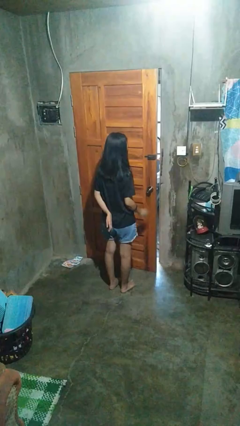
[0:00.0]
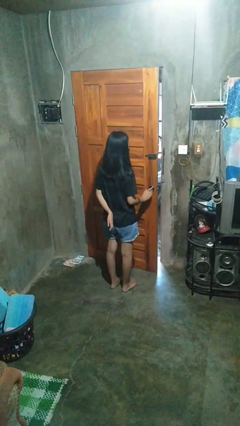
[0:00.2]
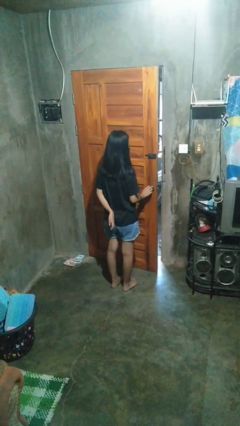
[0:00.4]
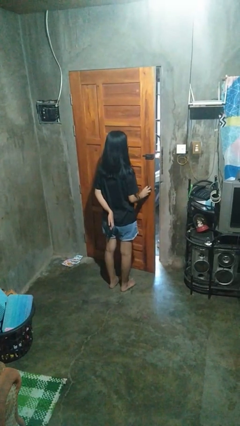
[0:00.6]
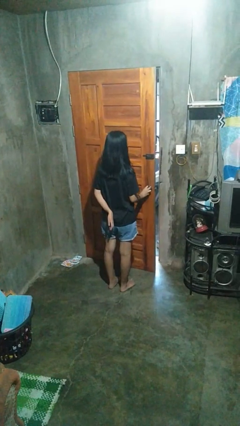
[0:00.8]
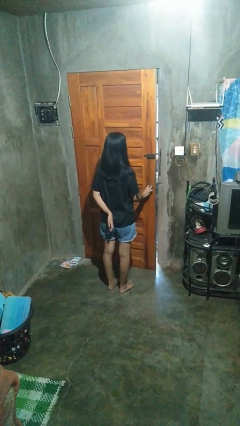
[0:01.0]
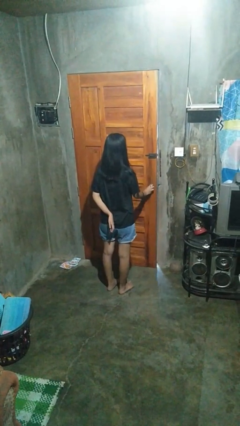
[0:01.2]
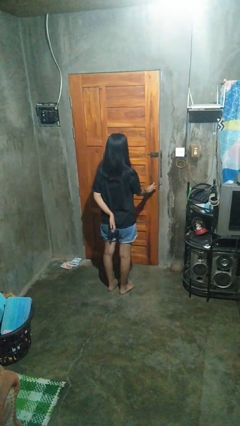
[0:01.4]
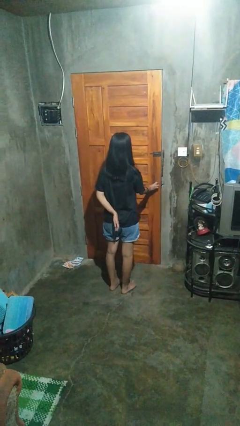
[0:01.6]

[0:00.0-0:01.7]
person closes facility door

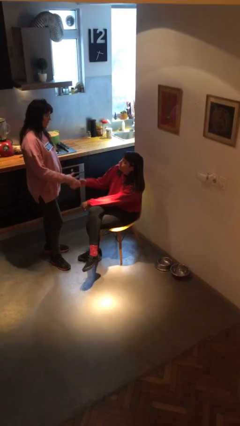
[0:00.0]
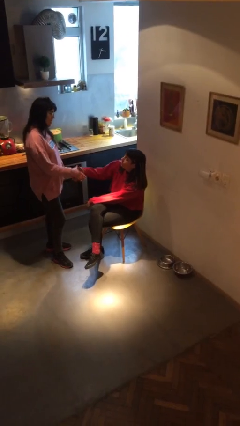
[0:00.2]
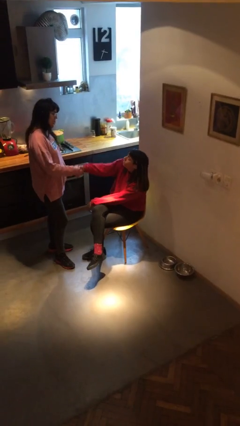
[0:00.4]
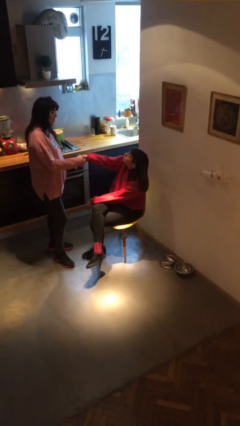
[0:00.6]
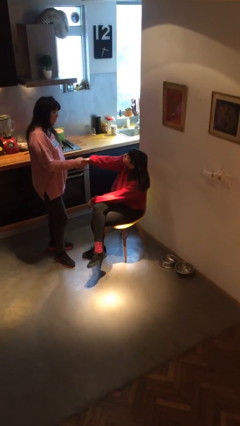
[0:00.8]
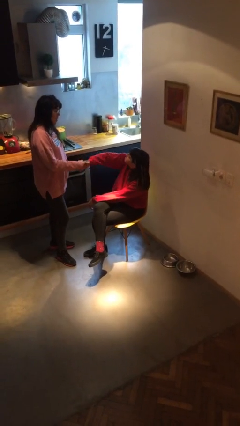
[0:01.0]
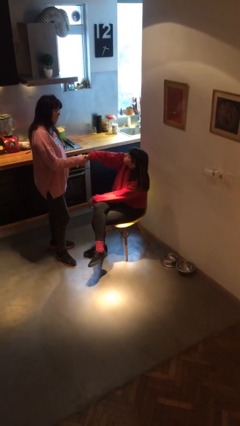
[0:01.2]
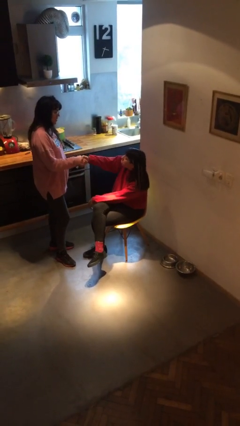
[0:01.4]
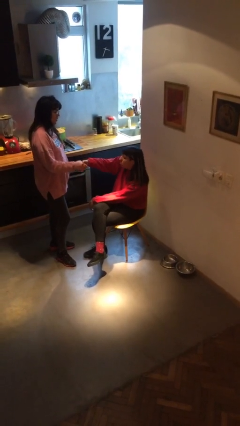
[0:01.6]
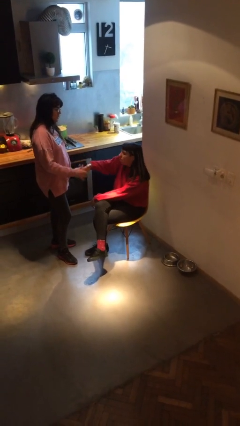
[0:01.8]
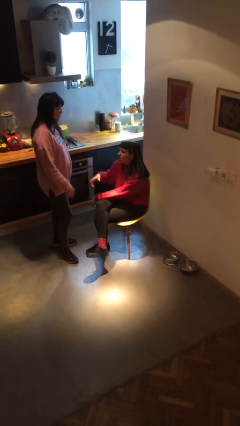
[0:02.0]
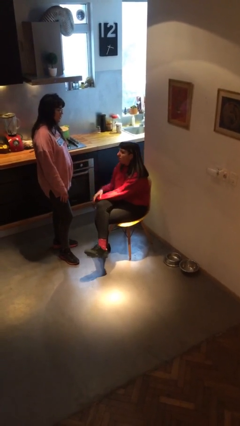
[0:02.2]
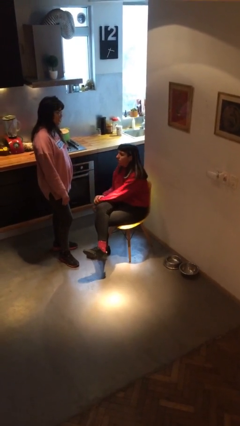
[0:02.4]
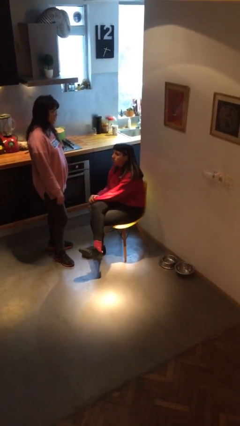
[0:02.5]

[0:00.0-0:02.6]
person shakes hand

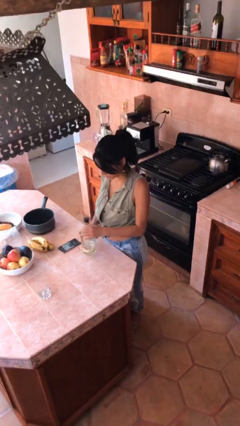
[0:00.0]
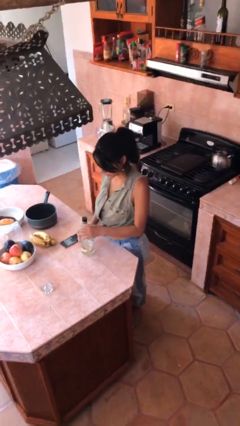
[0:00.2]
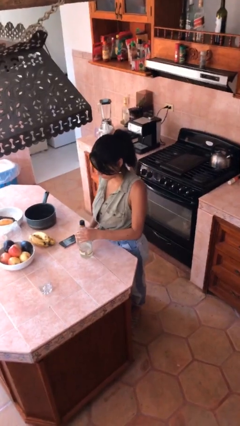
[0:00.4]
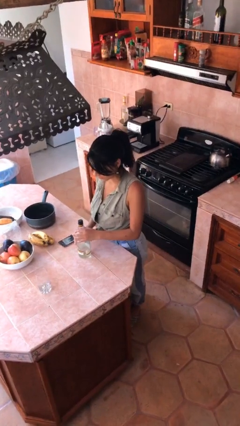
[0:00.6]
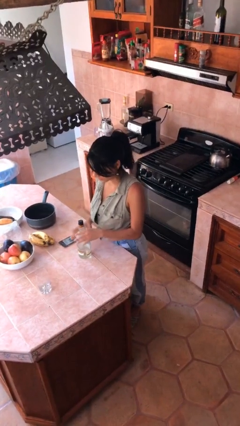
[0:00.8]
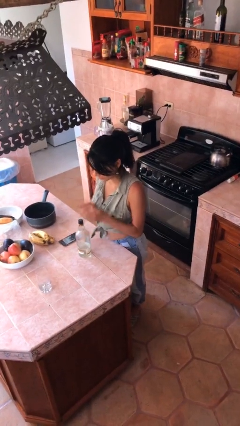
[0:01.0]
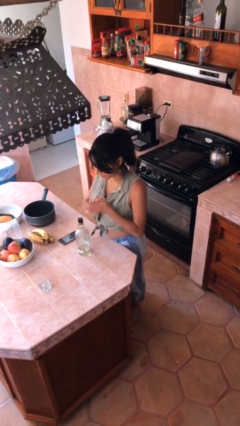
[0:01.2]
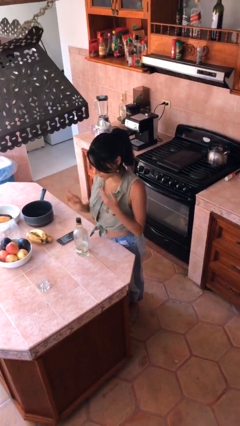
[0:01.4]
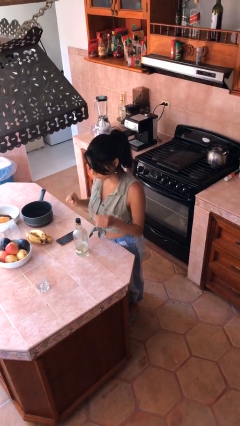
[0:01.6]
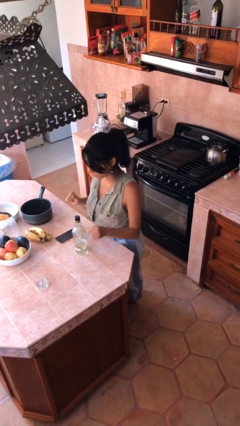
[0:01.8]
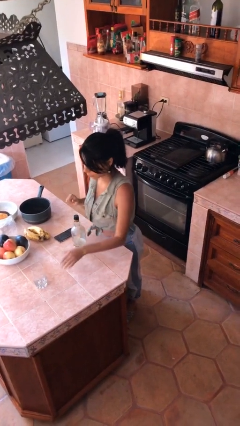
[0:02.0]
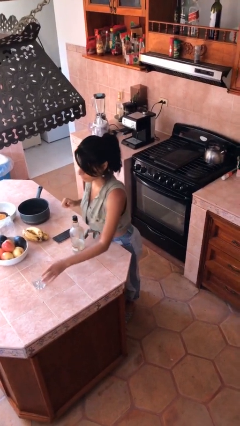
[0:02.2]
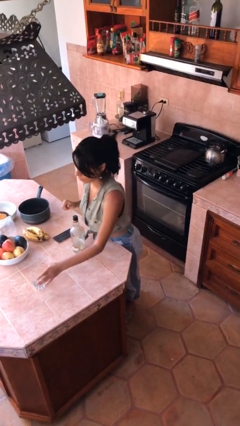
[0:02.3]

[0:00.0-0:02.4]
person puts down object on table

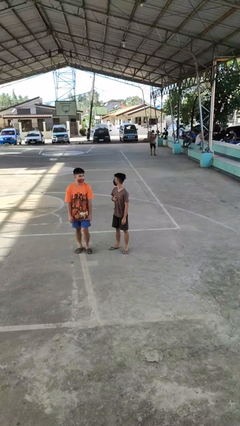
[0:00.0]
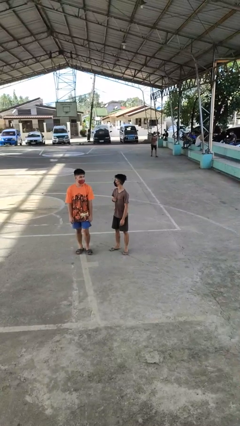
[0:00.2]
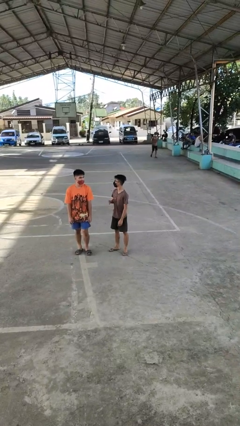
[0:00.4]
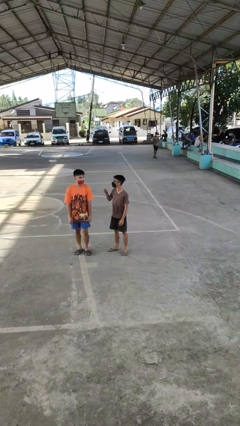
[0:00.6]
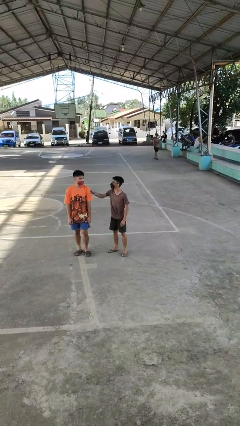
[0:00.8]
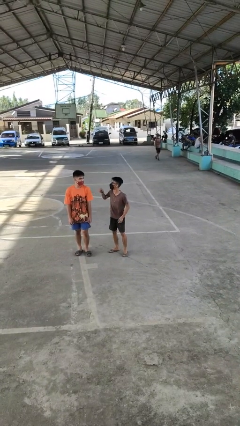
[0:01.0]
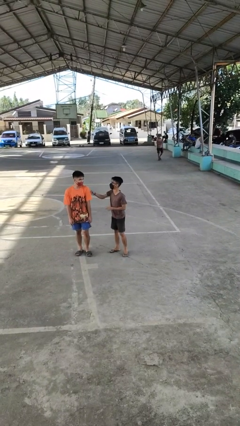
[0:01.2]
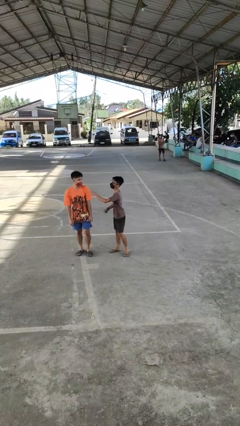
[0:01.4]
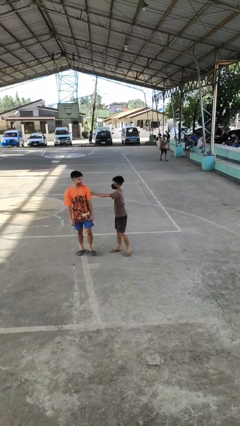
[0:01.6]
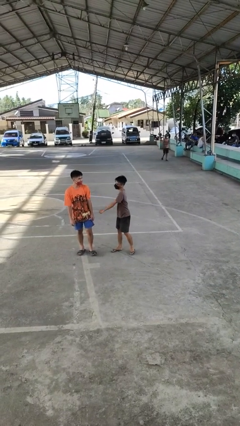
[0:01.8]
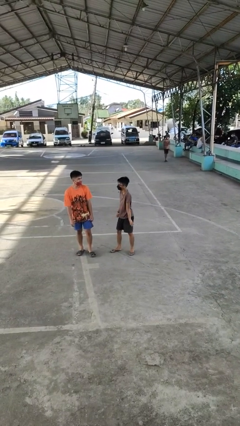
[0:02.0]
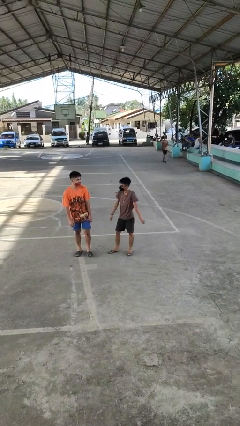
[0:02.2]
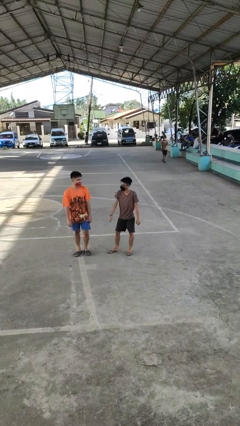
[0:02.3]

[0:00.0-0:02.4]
person pounds shoulders of person

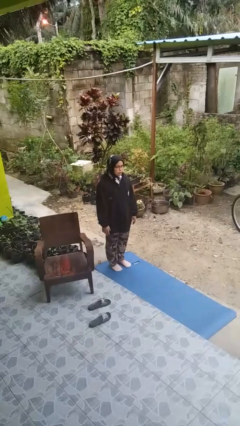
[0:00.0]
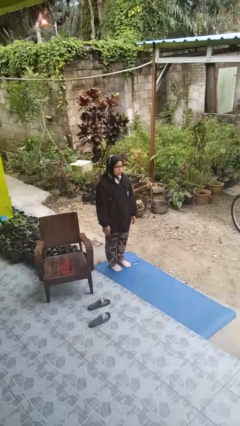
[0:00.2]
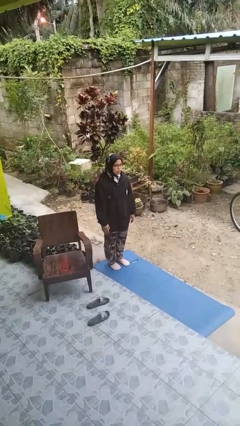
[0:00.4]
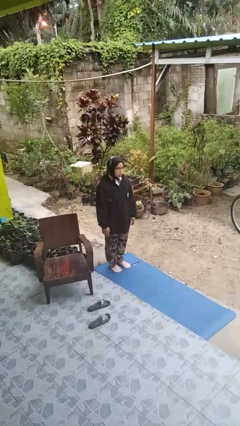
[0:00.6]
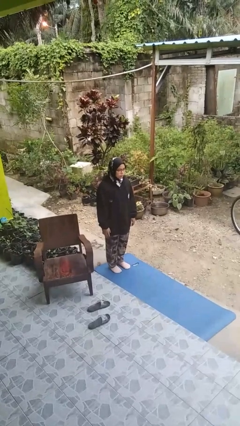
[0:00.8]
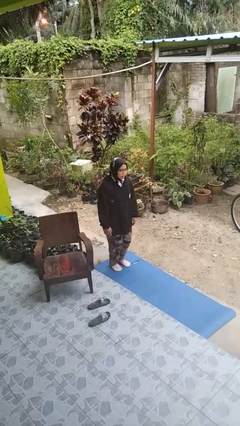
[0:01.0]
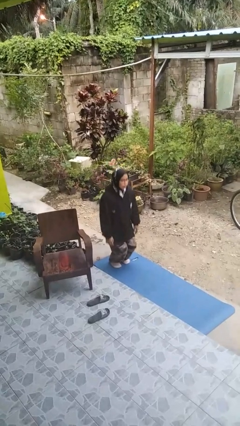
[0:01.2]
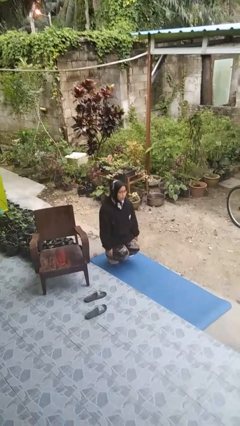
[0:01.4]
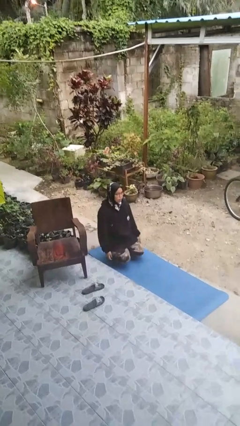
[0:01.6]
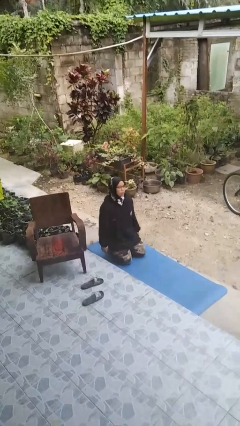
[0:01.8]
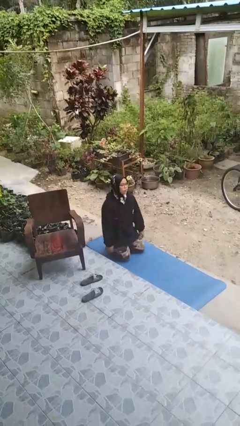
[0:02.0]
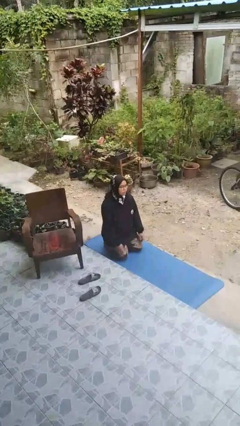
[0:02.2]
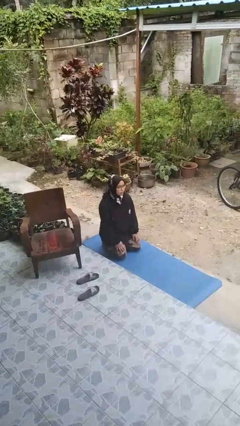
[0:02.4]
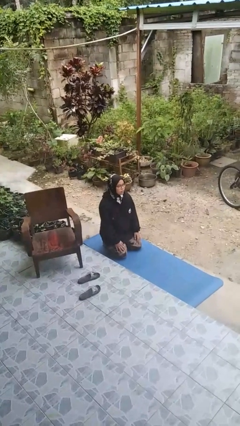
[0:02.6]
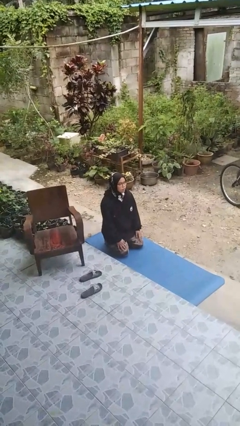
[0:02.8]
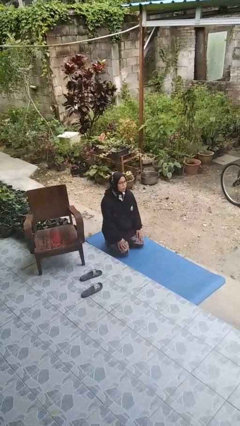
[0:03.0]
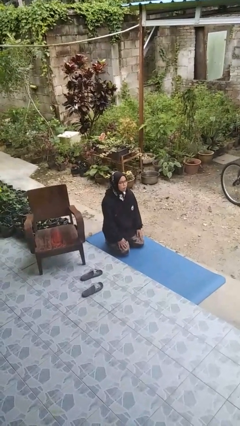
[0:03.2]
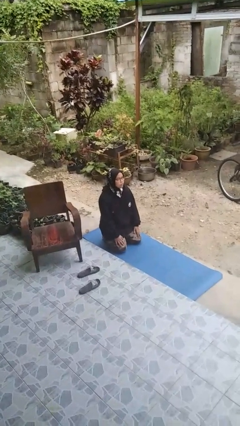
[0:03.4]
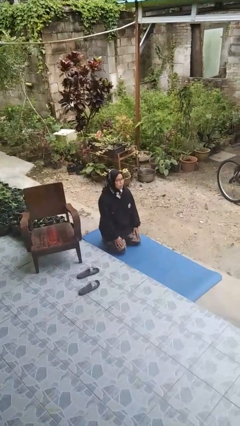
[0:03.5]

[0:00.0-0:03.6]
person kneels

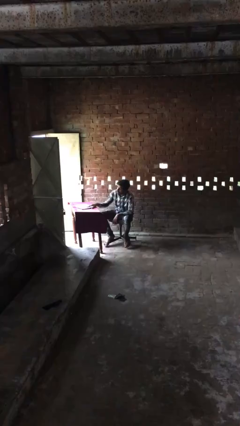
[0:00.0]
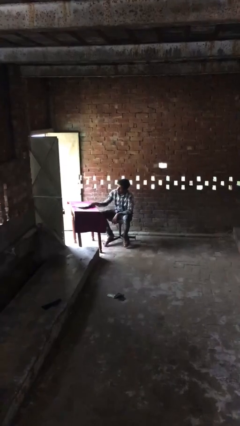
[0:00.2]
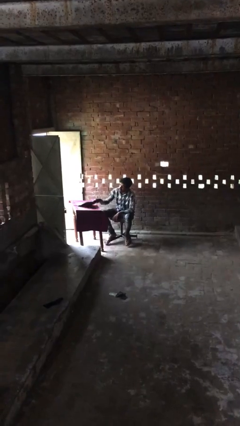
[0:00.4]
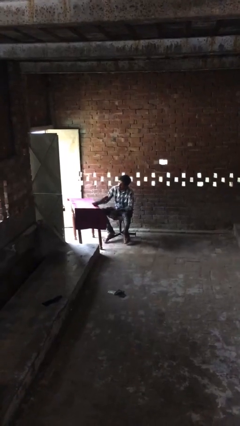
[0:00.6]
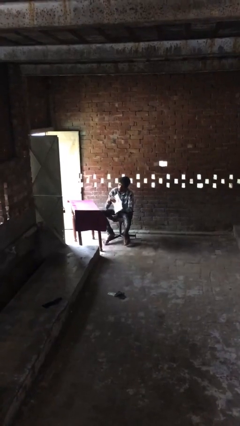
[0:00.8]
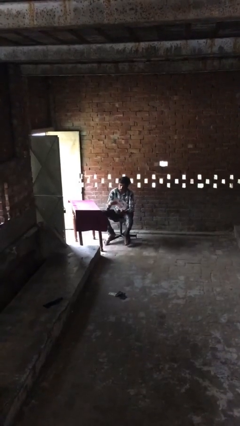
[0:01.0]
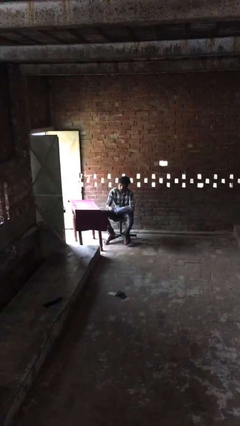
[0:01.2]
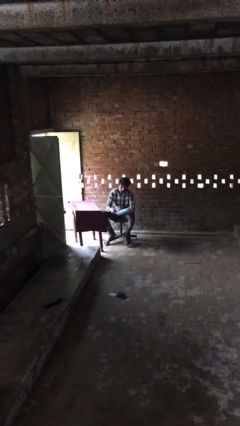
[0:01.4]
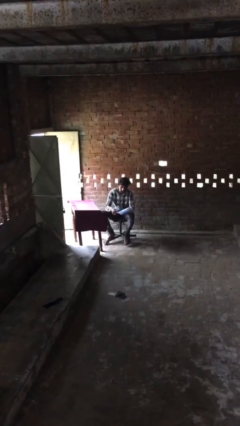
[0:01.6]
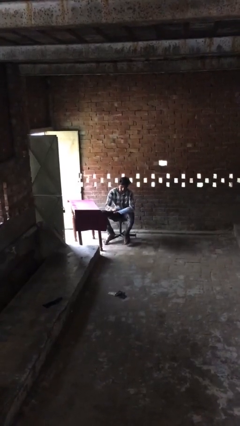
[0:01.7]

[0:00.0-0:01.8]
person picks up object from table

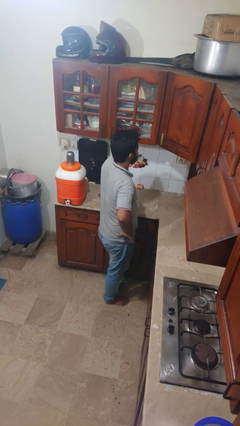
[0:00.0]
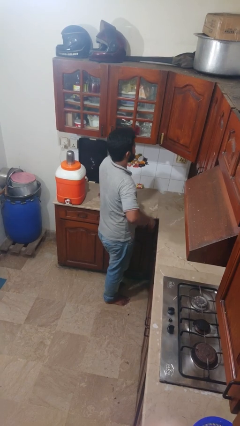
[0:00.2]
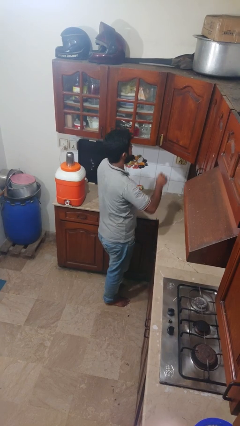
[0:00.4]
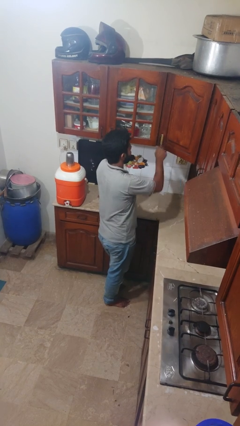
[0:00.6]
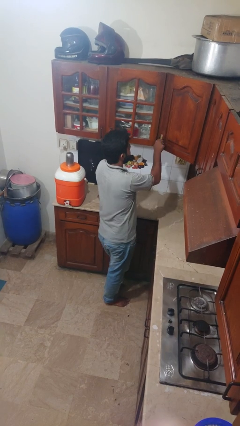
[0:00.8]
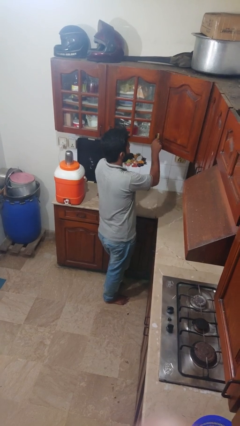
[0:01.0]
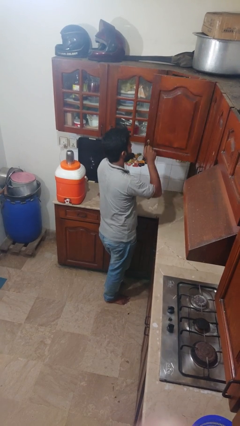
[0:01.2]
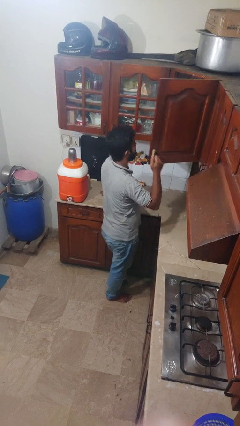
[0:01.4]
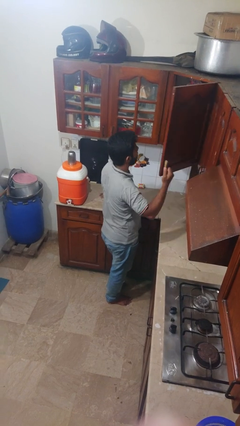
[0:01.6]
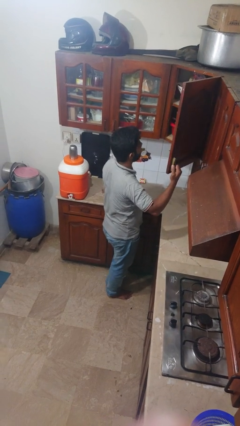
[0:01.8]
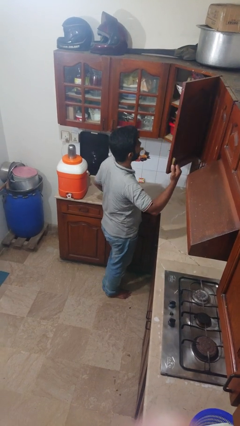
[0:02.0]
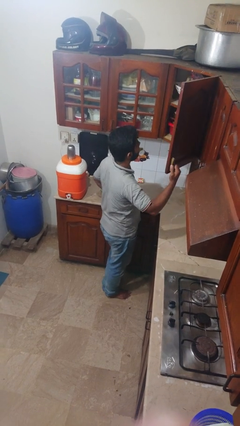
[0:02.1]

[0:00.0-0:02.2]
person closes cabinet
